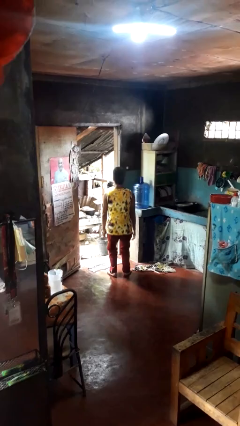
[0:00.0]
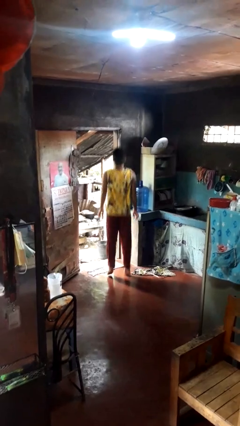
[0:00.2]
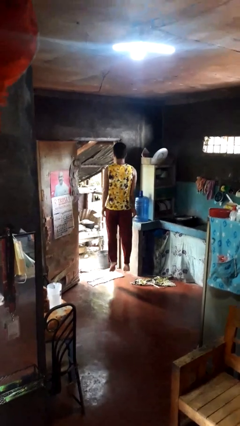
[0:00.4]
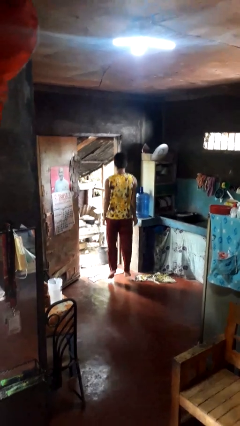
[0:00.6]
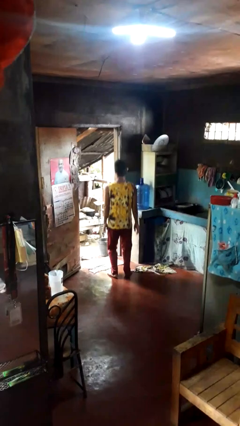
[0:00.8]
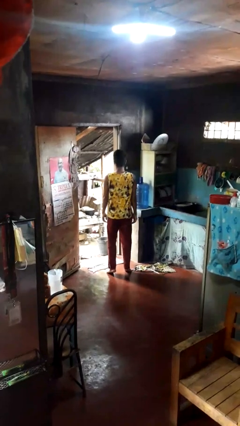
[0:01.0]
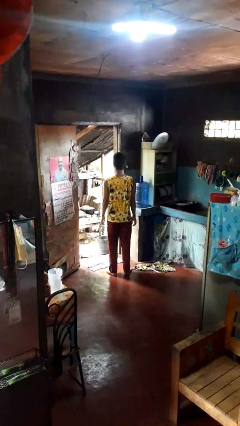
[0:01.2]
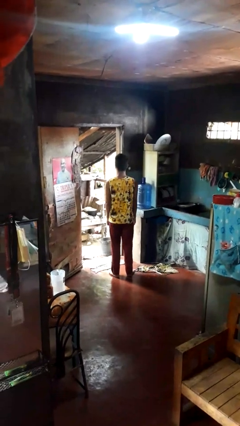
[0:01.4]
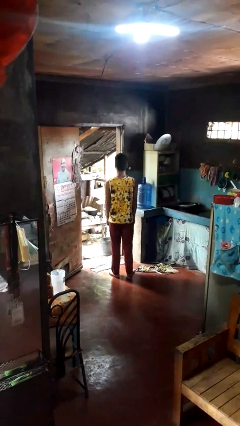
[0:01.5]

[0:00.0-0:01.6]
person jumps

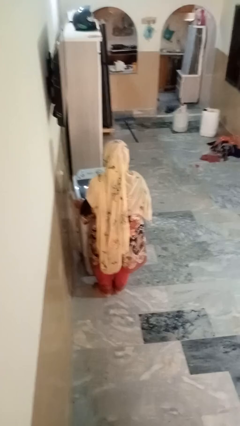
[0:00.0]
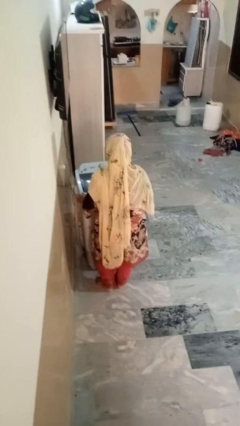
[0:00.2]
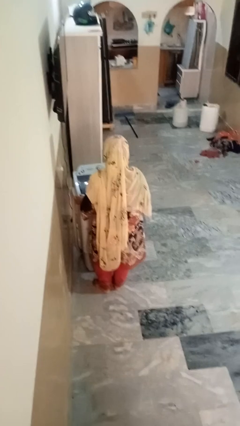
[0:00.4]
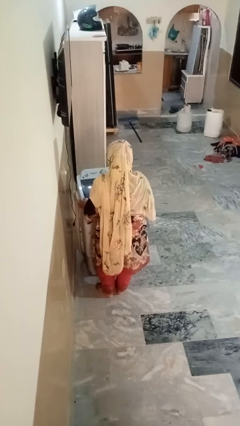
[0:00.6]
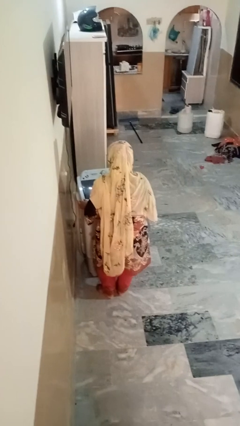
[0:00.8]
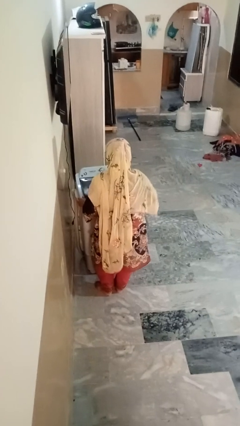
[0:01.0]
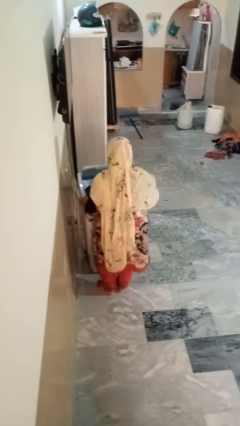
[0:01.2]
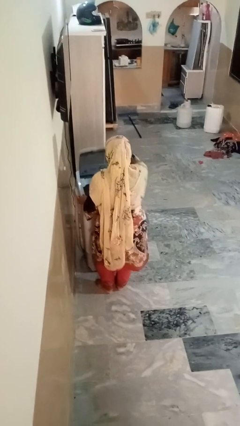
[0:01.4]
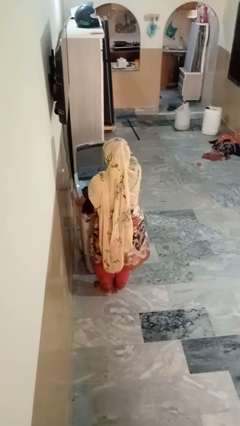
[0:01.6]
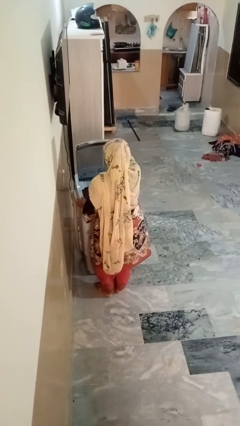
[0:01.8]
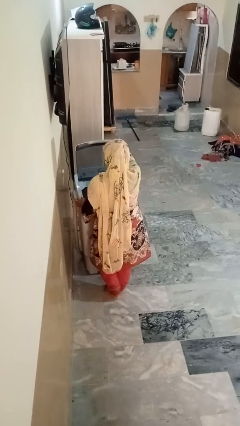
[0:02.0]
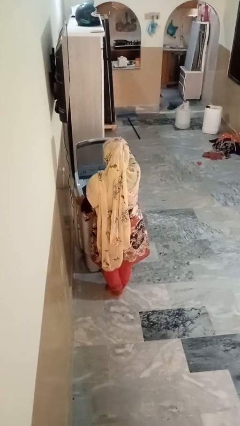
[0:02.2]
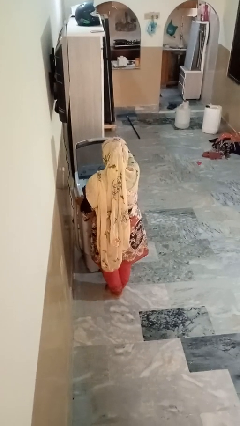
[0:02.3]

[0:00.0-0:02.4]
person opens clothes washer

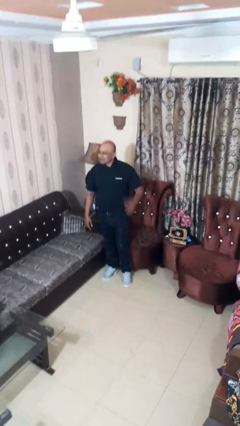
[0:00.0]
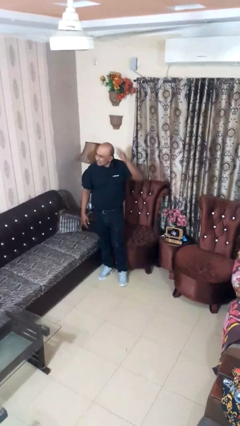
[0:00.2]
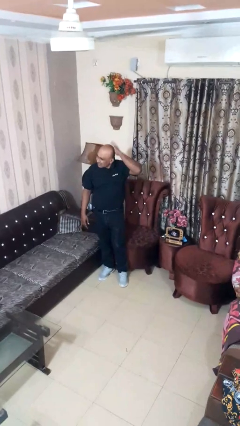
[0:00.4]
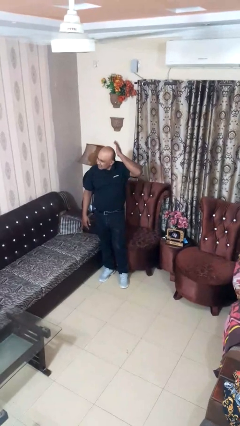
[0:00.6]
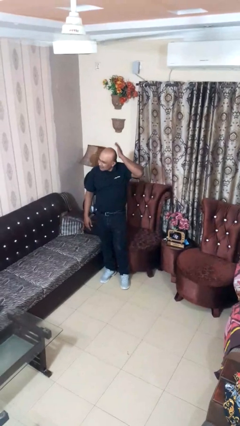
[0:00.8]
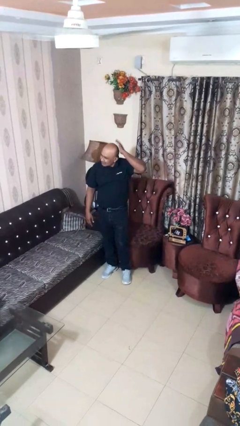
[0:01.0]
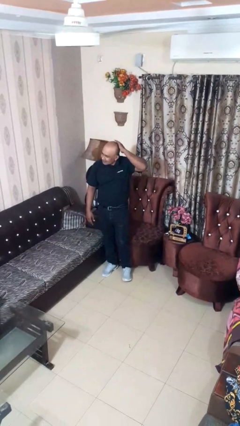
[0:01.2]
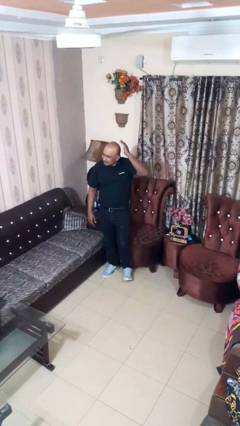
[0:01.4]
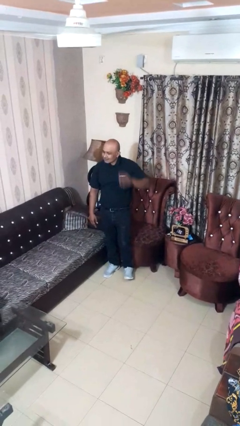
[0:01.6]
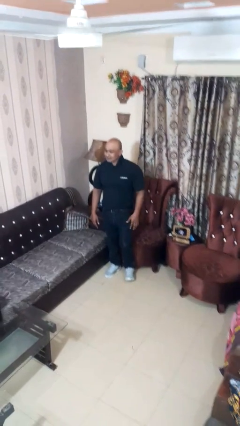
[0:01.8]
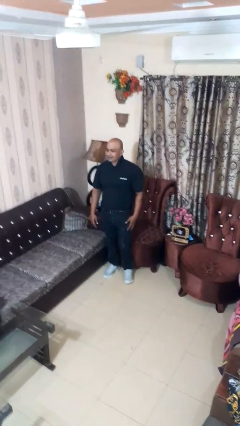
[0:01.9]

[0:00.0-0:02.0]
person pats head

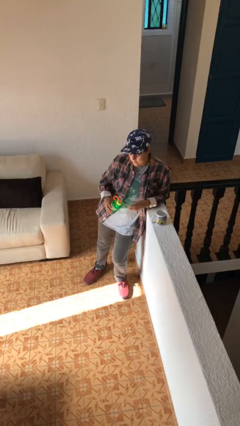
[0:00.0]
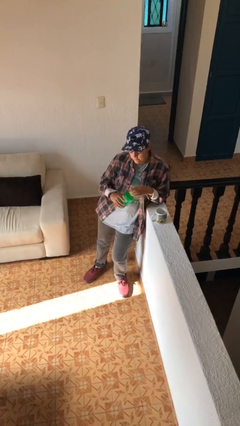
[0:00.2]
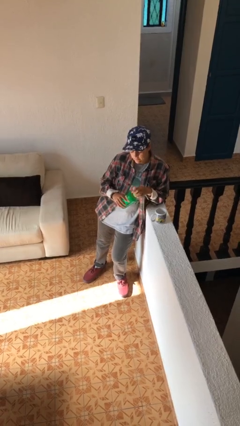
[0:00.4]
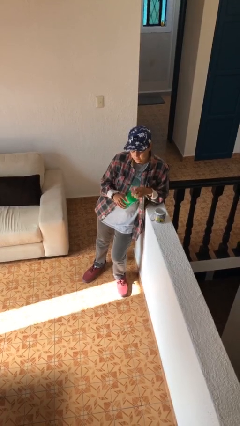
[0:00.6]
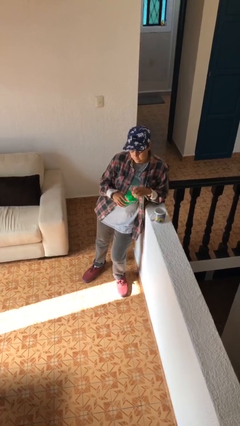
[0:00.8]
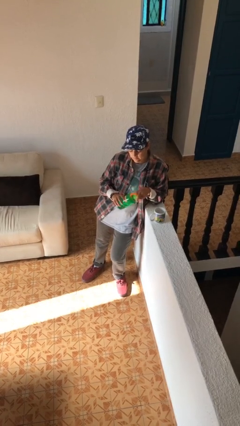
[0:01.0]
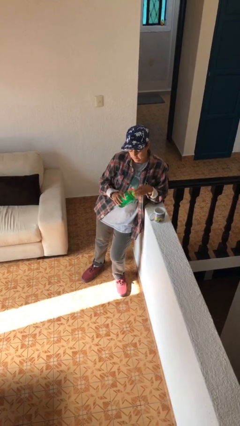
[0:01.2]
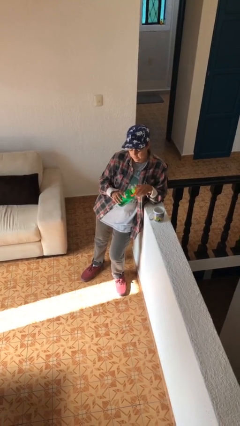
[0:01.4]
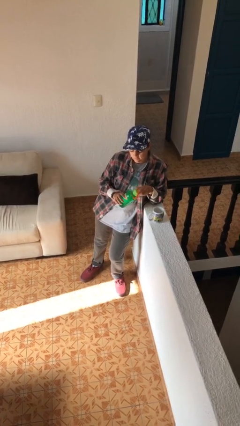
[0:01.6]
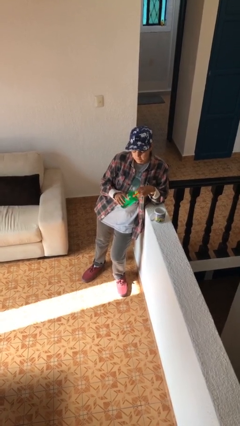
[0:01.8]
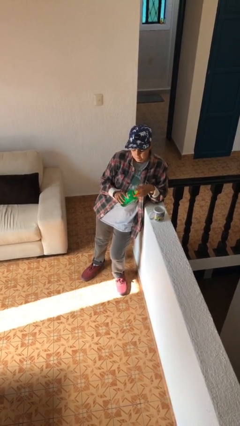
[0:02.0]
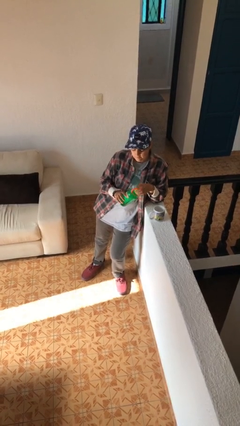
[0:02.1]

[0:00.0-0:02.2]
person unscrews lid from bottle

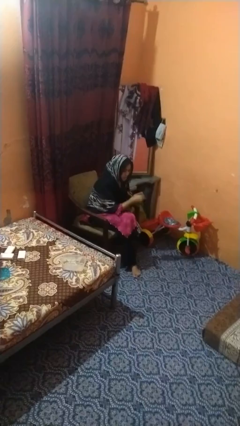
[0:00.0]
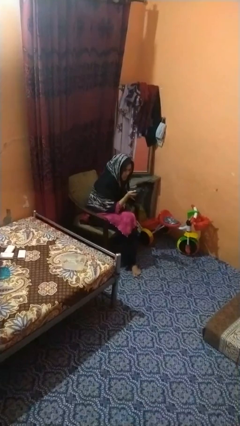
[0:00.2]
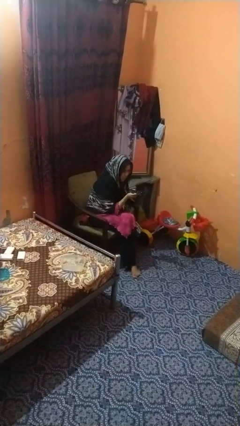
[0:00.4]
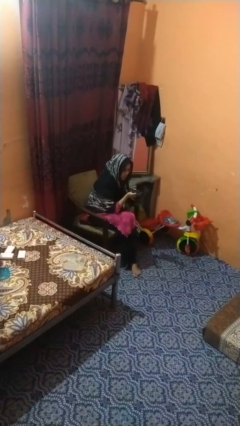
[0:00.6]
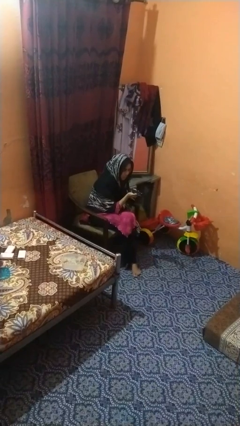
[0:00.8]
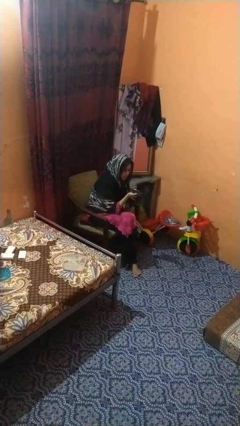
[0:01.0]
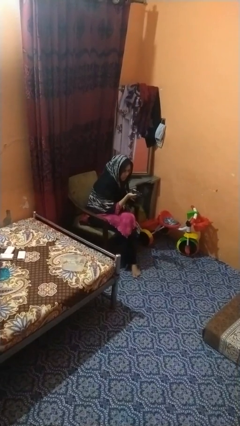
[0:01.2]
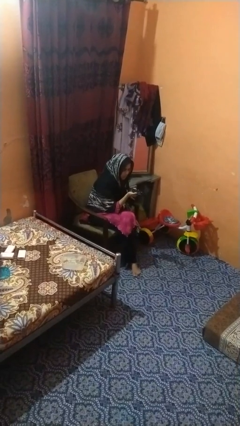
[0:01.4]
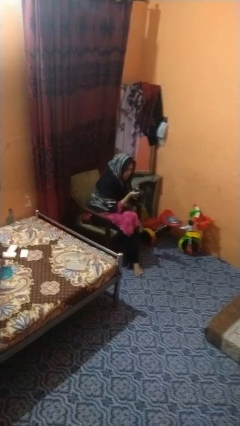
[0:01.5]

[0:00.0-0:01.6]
person uses television remote

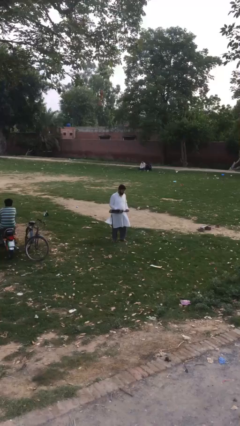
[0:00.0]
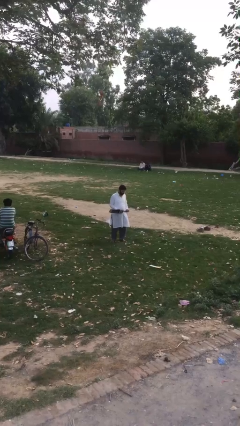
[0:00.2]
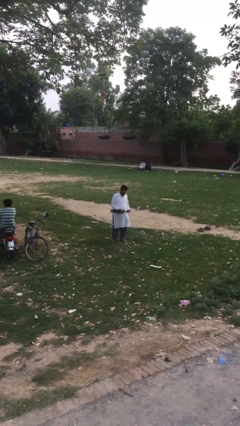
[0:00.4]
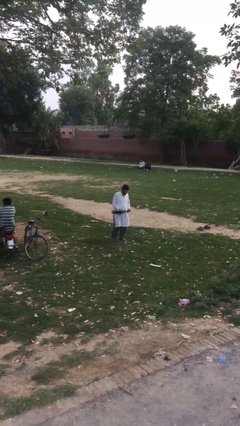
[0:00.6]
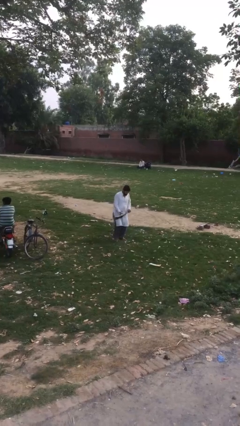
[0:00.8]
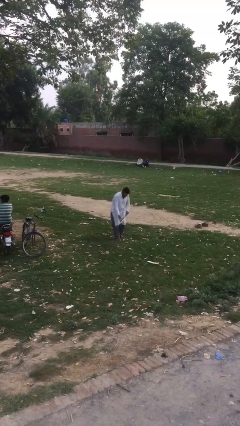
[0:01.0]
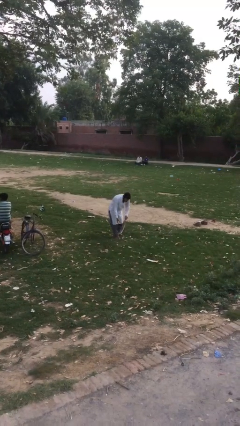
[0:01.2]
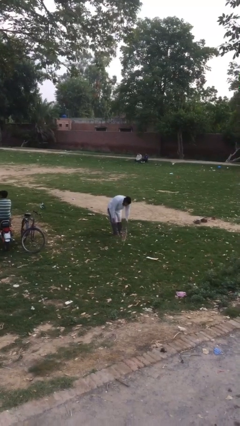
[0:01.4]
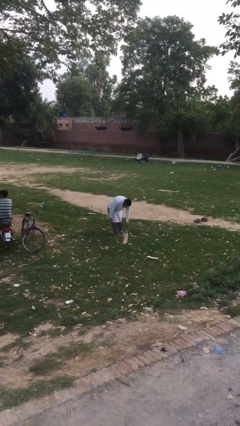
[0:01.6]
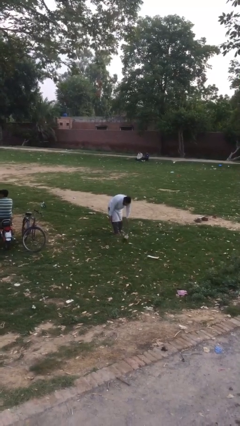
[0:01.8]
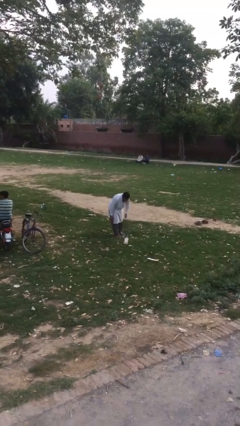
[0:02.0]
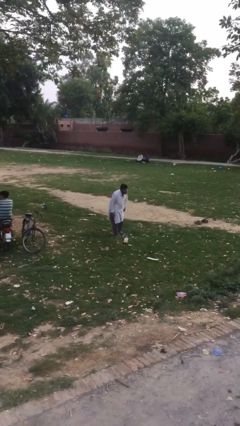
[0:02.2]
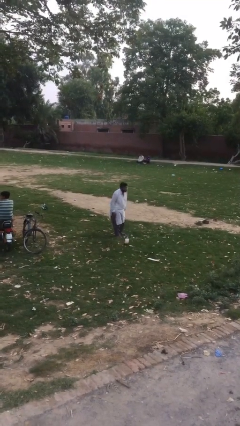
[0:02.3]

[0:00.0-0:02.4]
person puts down object on floor

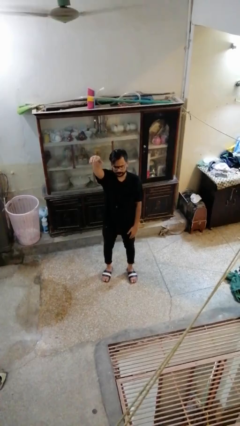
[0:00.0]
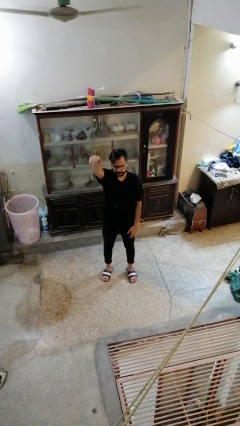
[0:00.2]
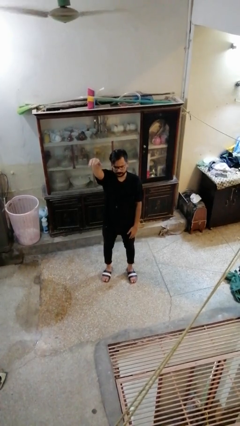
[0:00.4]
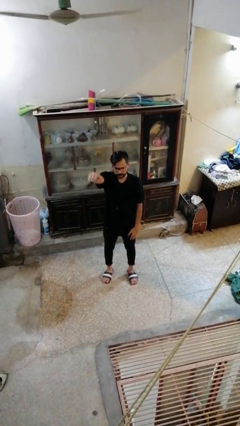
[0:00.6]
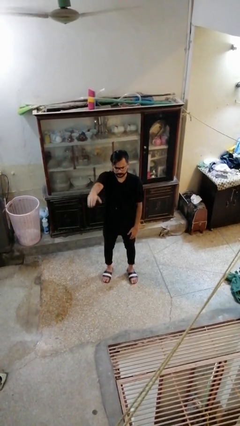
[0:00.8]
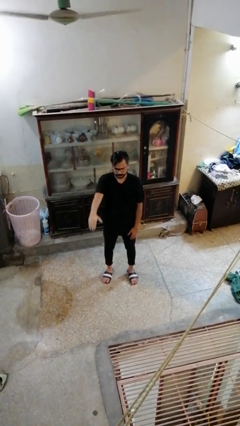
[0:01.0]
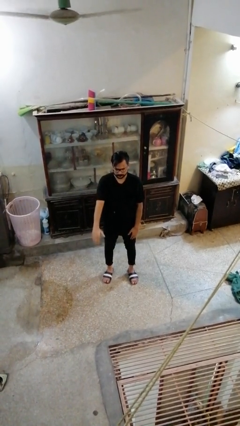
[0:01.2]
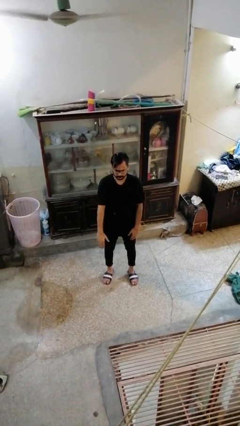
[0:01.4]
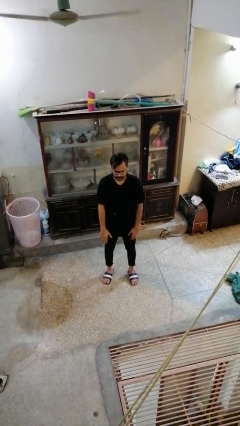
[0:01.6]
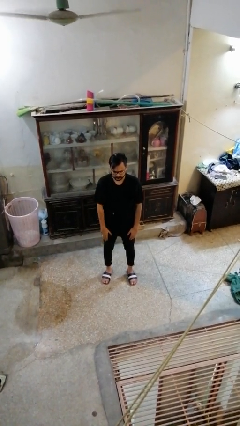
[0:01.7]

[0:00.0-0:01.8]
person gestures swipe down

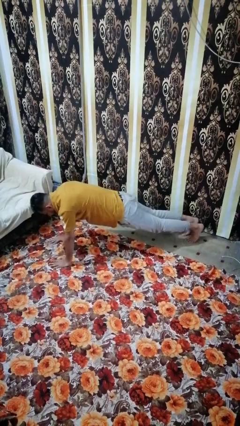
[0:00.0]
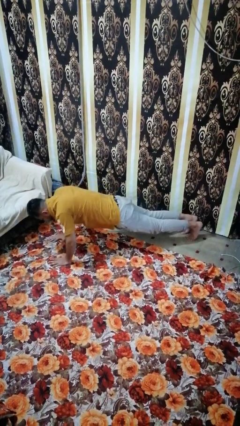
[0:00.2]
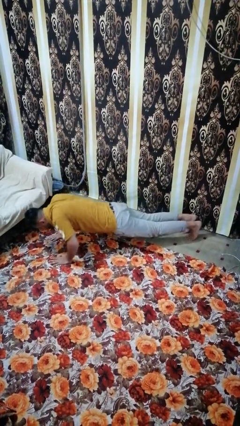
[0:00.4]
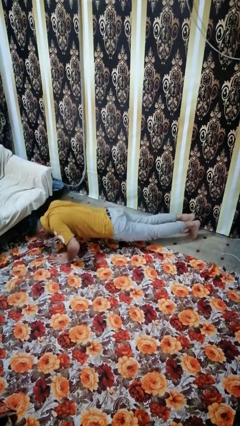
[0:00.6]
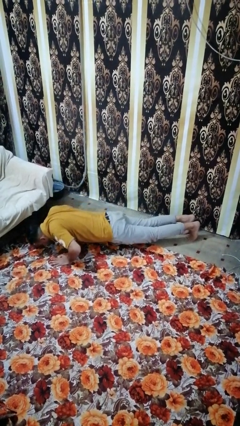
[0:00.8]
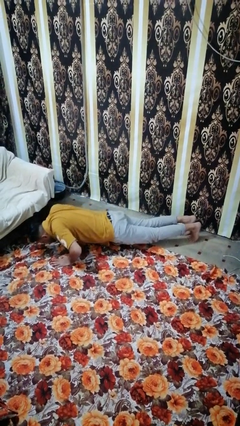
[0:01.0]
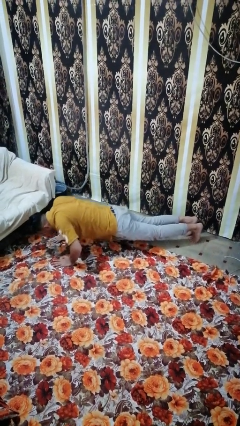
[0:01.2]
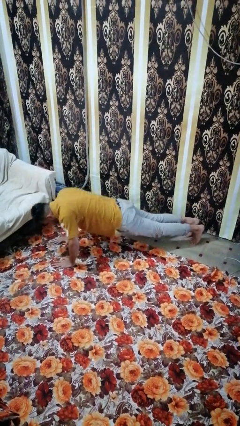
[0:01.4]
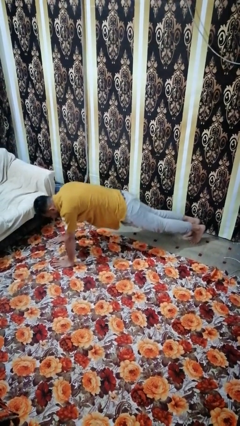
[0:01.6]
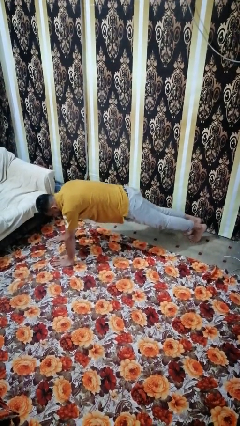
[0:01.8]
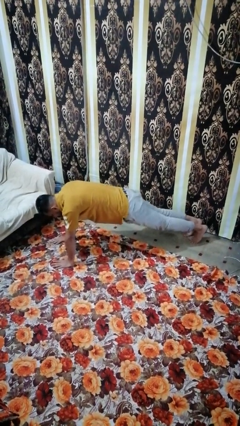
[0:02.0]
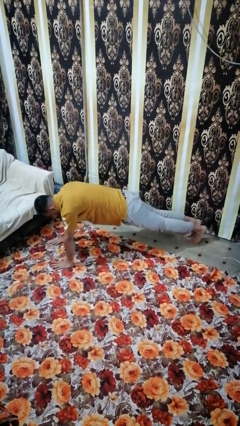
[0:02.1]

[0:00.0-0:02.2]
person exercises with pushup

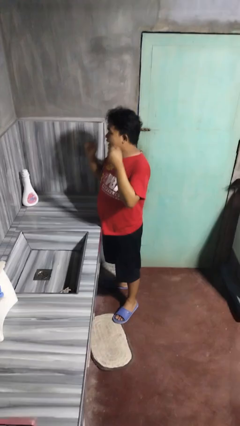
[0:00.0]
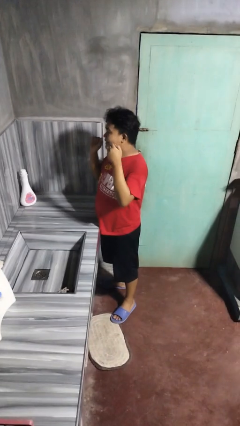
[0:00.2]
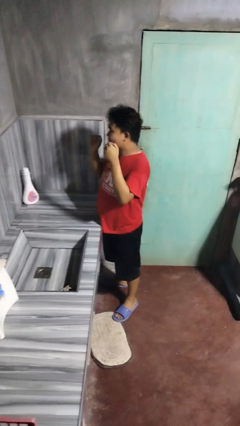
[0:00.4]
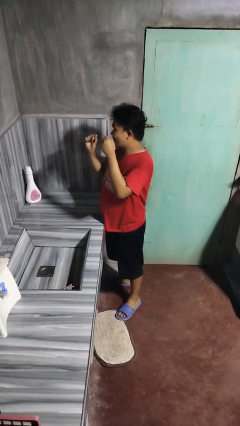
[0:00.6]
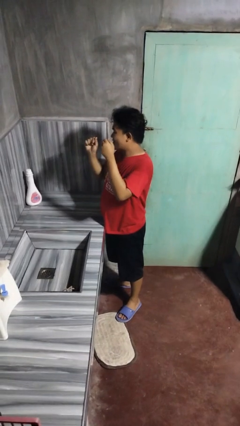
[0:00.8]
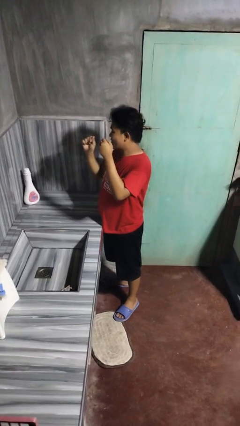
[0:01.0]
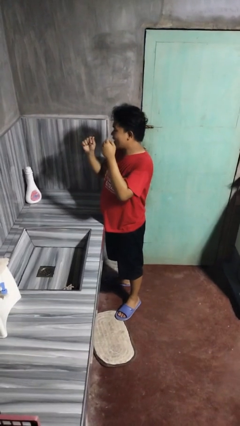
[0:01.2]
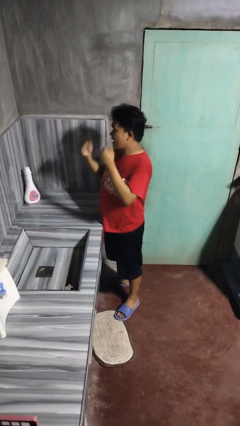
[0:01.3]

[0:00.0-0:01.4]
person flosses
